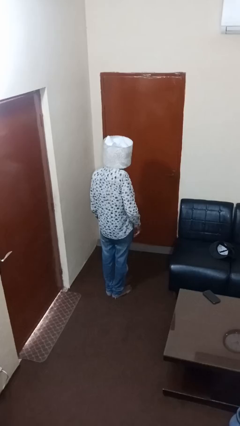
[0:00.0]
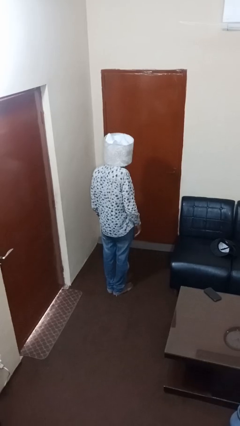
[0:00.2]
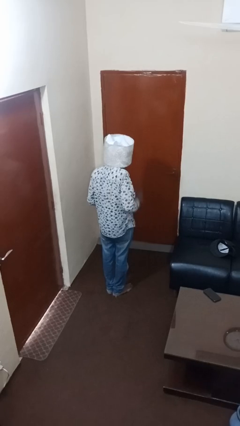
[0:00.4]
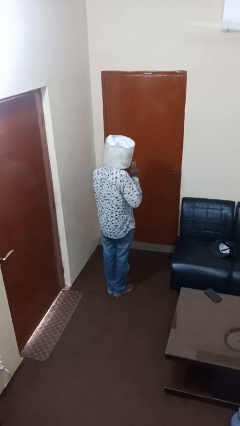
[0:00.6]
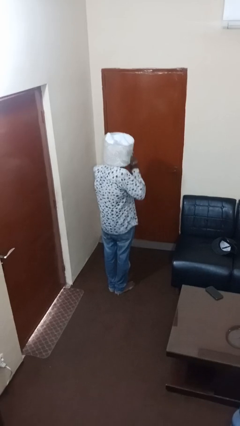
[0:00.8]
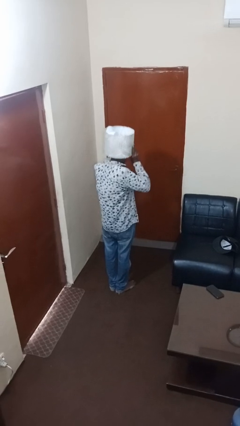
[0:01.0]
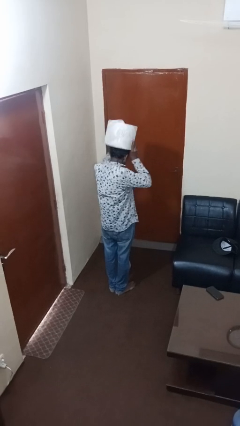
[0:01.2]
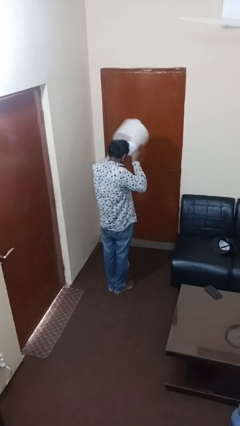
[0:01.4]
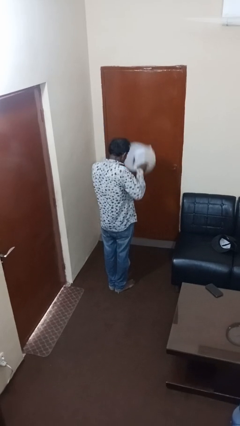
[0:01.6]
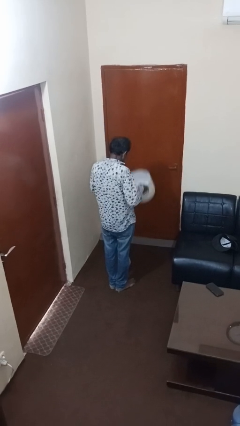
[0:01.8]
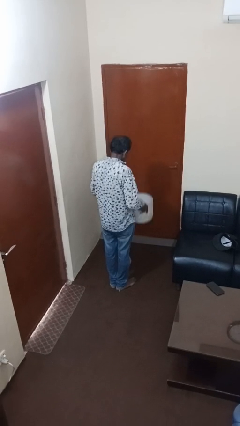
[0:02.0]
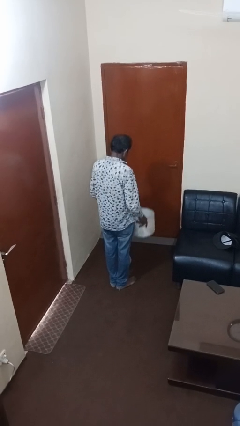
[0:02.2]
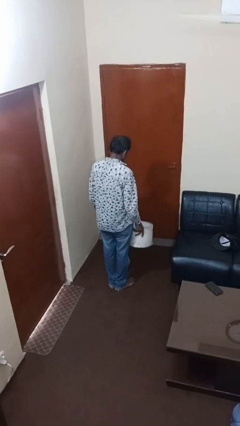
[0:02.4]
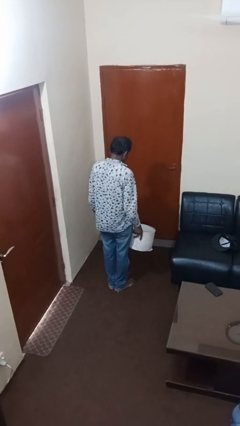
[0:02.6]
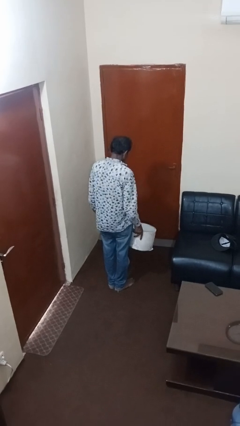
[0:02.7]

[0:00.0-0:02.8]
person takes off hat

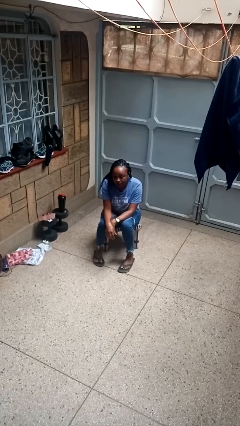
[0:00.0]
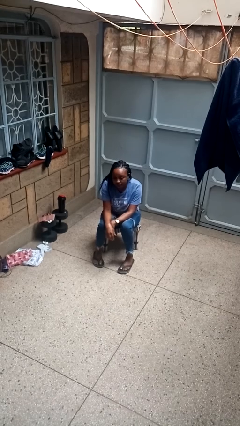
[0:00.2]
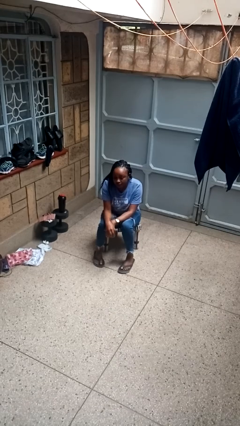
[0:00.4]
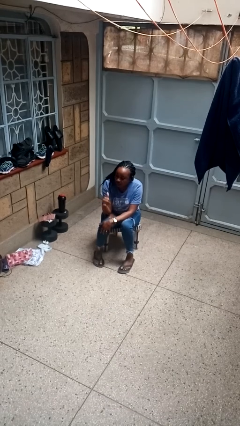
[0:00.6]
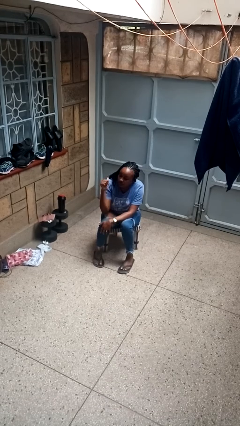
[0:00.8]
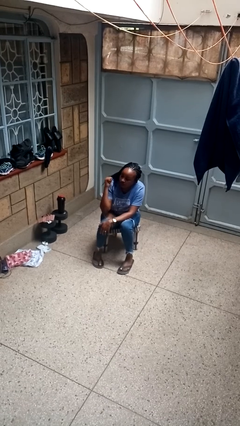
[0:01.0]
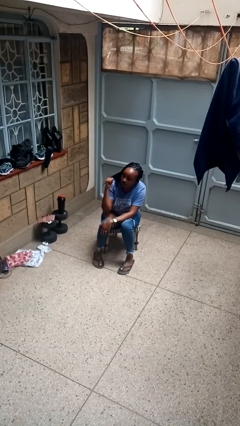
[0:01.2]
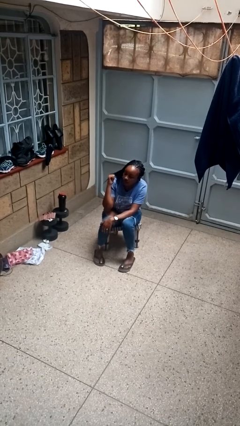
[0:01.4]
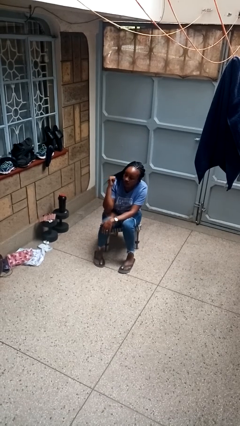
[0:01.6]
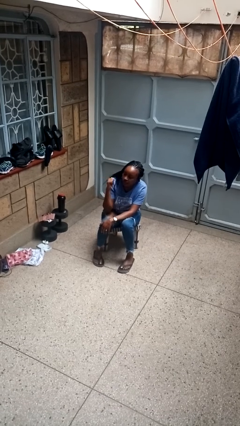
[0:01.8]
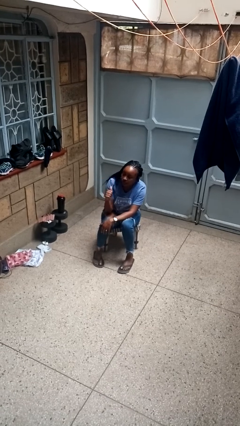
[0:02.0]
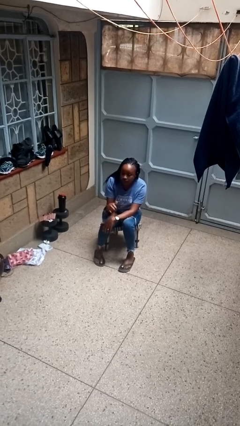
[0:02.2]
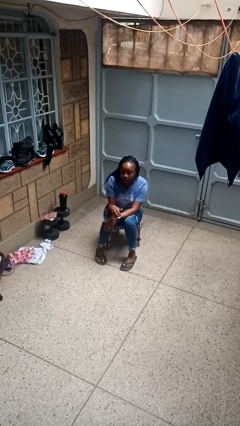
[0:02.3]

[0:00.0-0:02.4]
person gestures behind me

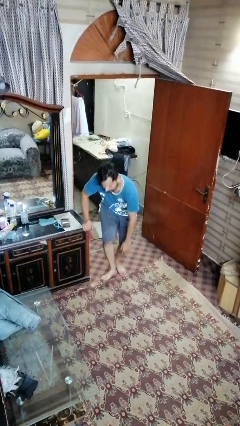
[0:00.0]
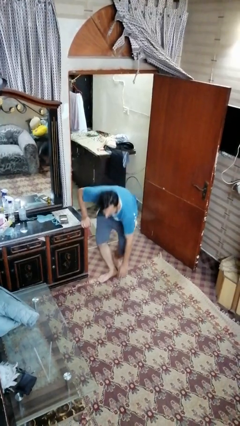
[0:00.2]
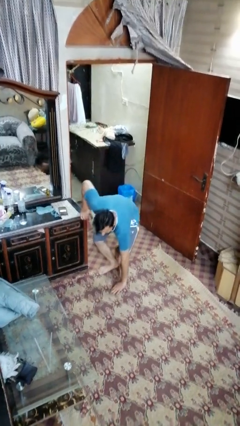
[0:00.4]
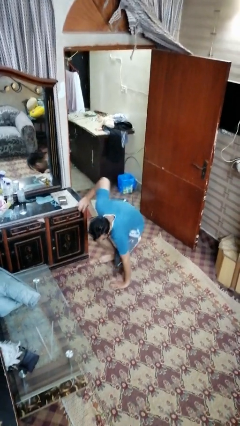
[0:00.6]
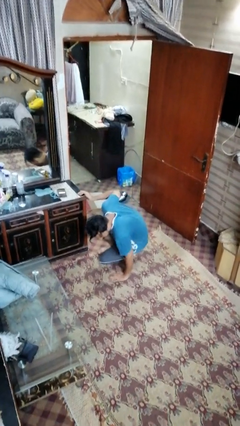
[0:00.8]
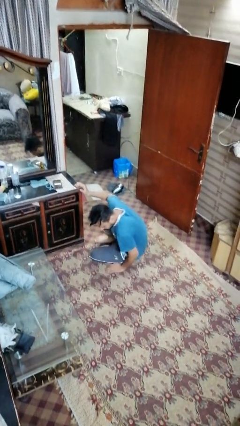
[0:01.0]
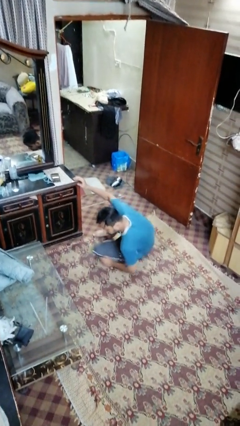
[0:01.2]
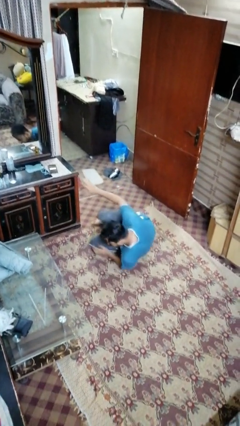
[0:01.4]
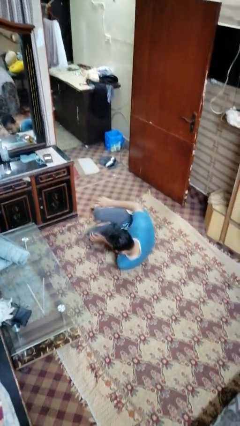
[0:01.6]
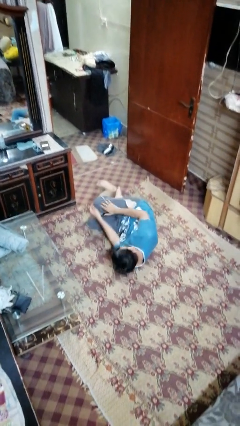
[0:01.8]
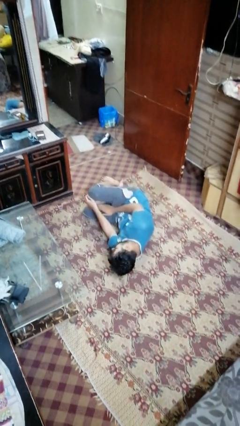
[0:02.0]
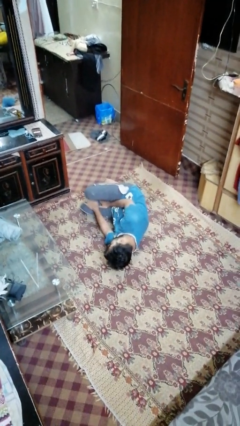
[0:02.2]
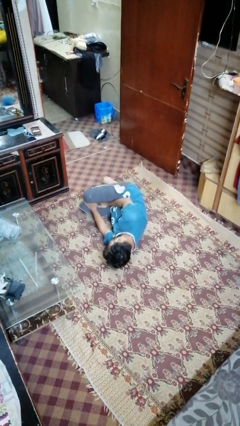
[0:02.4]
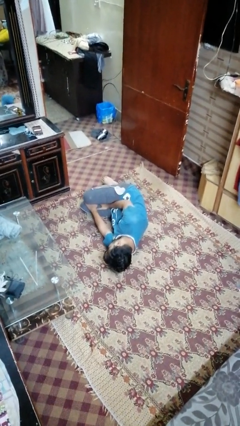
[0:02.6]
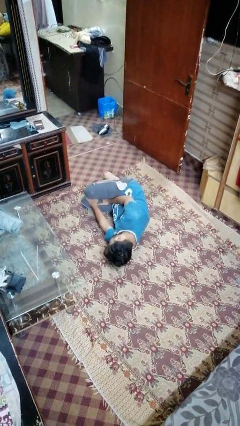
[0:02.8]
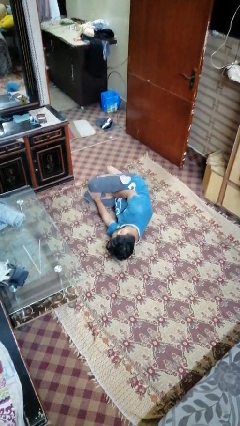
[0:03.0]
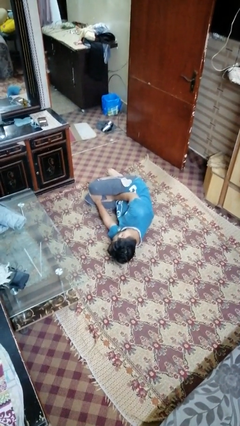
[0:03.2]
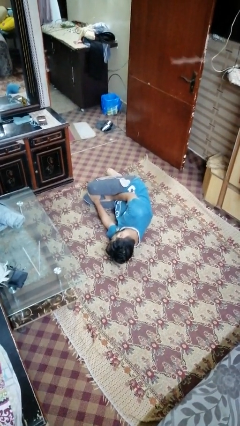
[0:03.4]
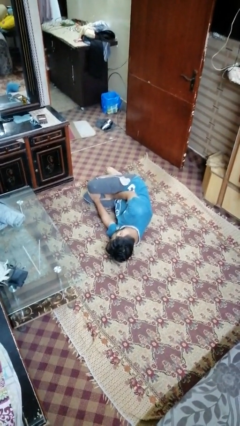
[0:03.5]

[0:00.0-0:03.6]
person lies down on floor

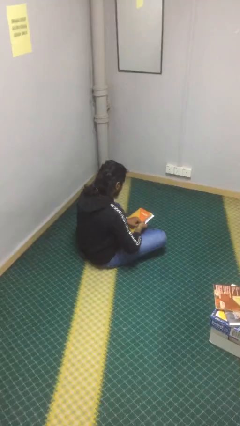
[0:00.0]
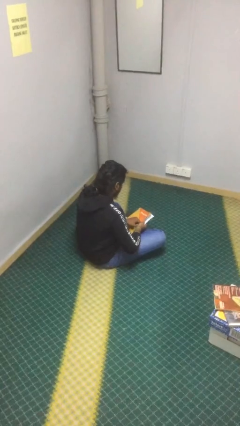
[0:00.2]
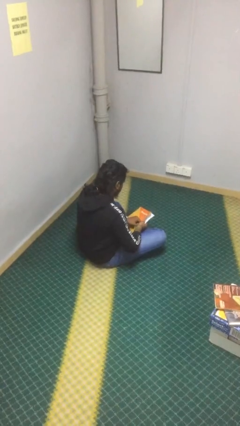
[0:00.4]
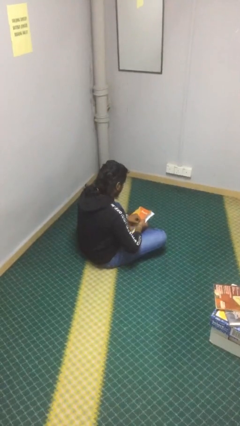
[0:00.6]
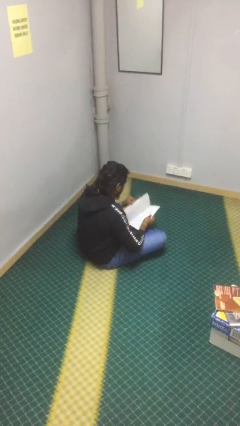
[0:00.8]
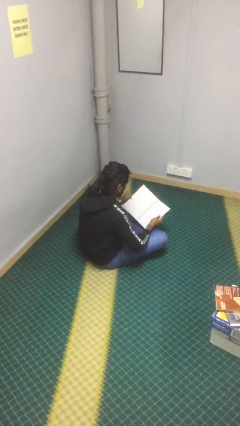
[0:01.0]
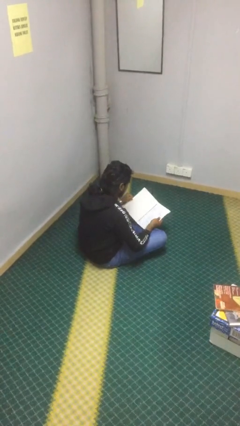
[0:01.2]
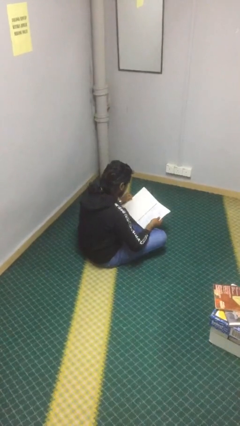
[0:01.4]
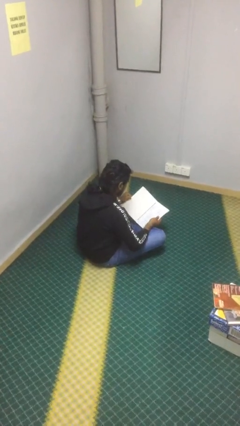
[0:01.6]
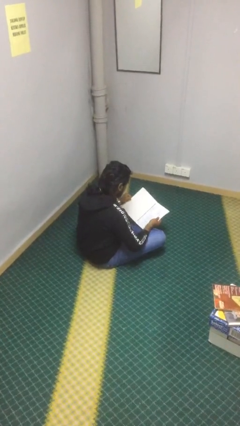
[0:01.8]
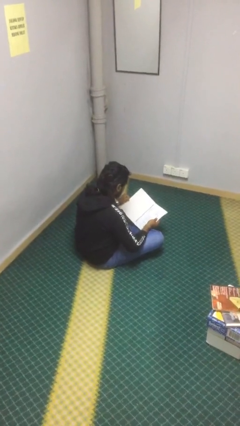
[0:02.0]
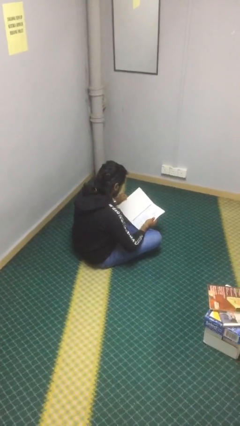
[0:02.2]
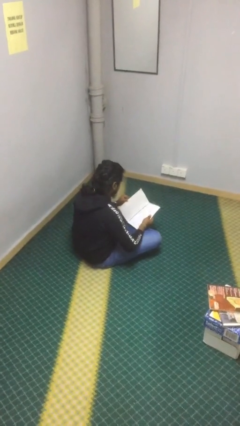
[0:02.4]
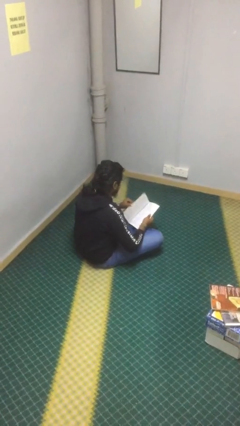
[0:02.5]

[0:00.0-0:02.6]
person reads book

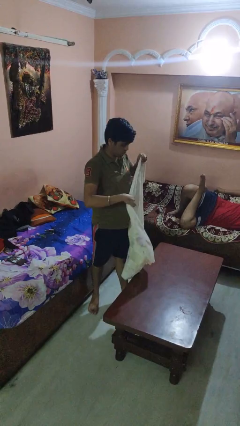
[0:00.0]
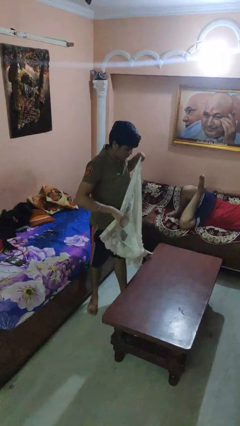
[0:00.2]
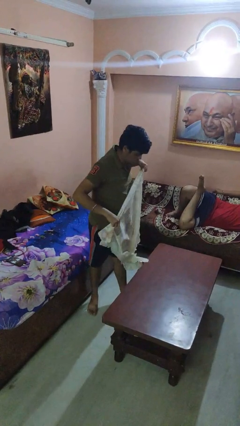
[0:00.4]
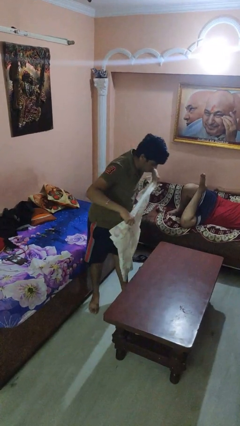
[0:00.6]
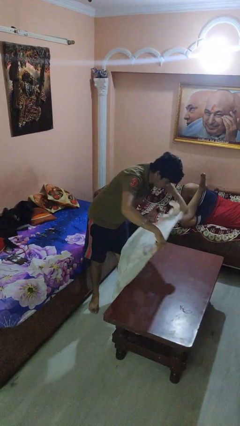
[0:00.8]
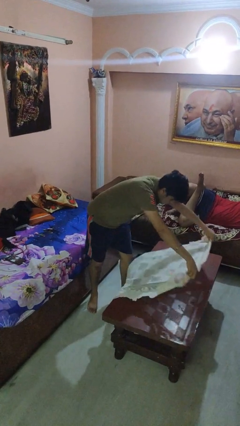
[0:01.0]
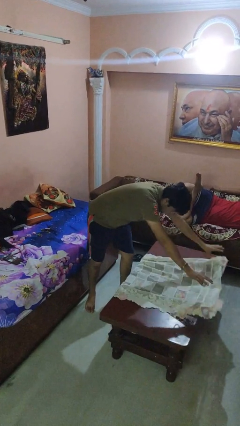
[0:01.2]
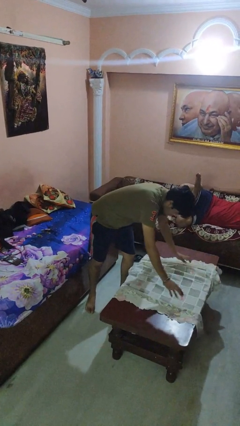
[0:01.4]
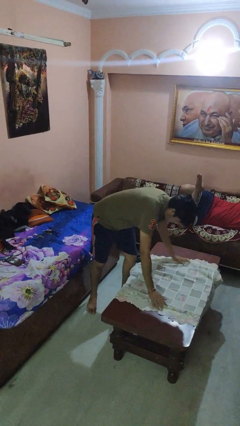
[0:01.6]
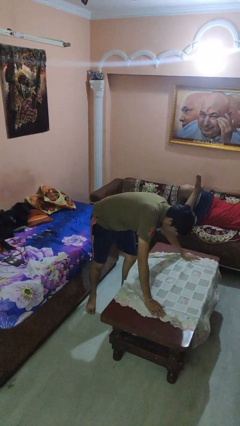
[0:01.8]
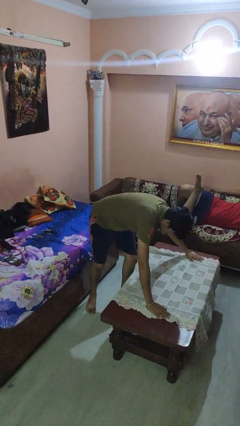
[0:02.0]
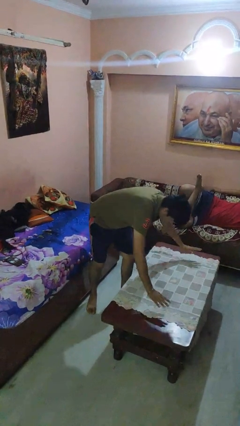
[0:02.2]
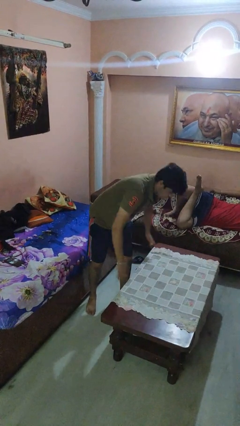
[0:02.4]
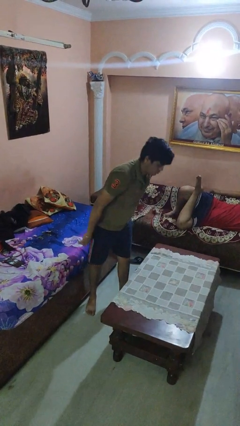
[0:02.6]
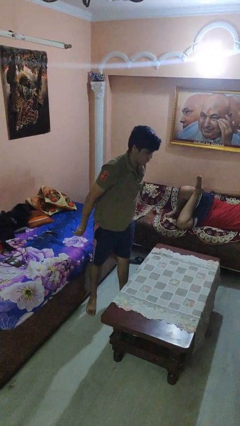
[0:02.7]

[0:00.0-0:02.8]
person spreads tablecloth

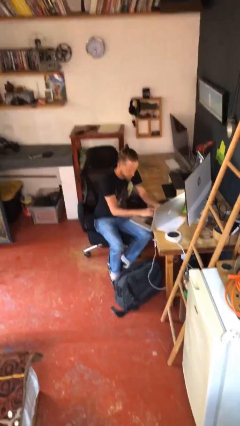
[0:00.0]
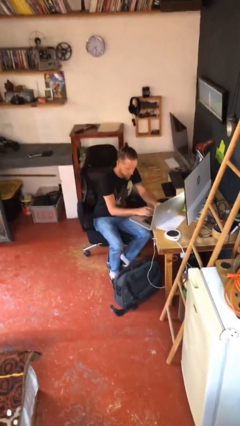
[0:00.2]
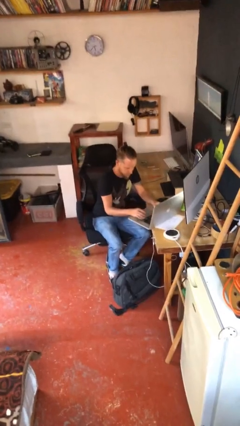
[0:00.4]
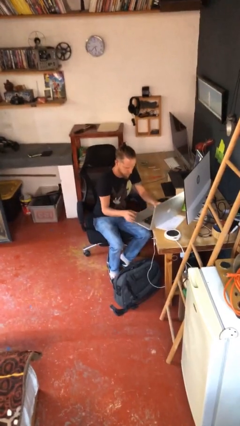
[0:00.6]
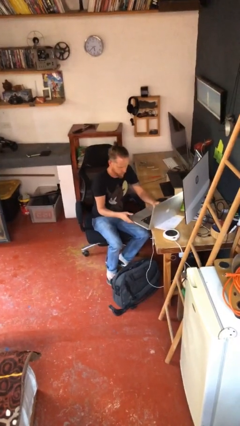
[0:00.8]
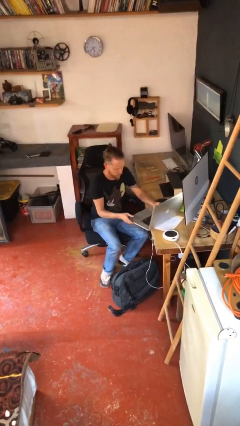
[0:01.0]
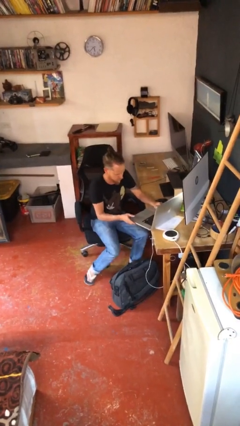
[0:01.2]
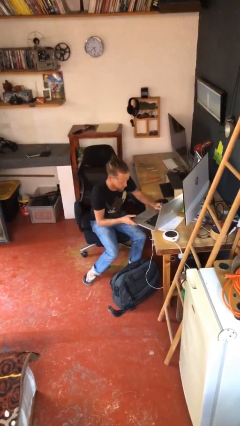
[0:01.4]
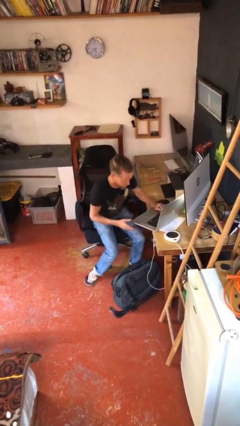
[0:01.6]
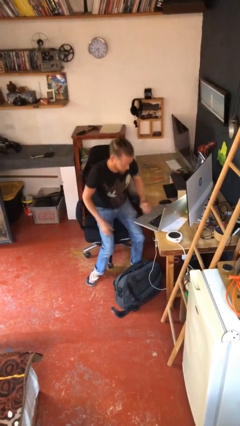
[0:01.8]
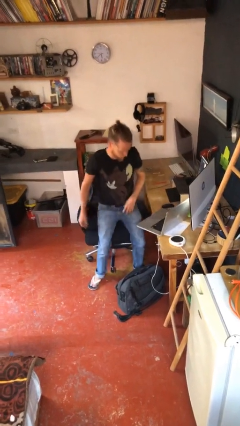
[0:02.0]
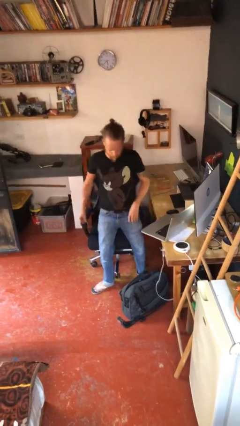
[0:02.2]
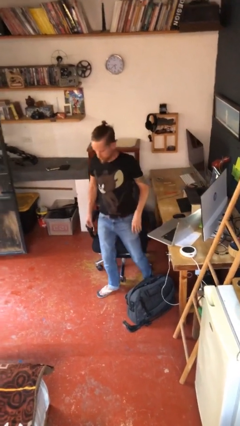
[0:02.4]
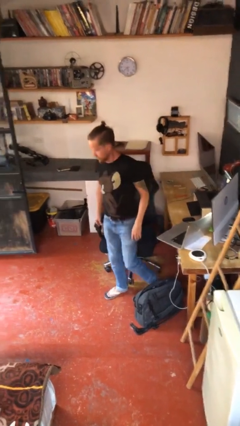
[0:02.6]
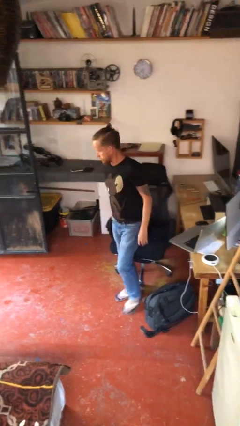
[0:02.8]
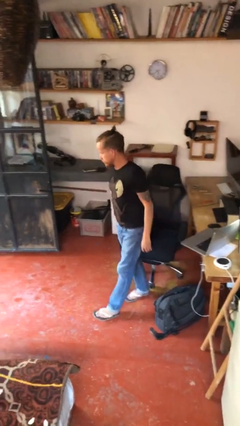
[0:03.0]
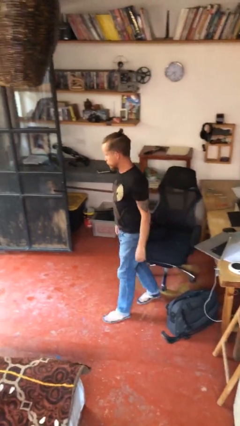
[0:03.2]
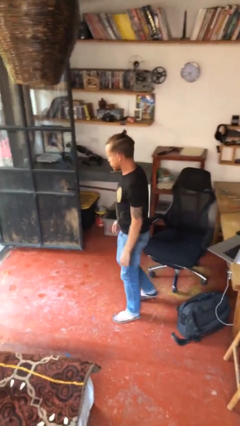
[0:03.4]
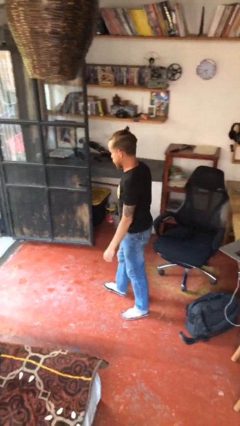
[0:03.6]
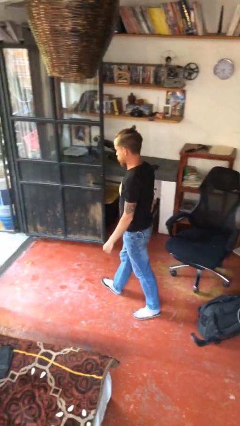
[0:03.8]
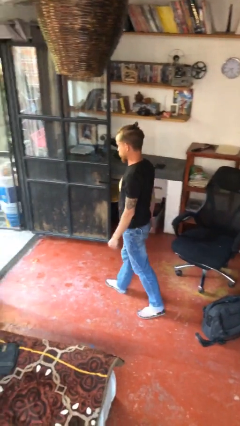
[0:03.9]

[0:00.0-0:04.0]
person stands up
